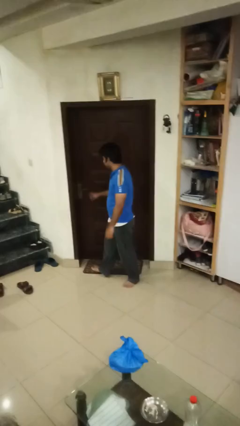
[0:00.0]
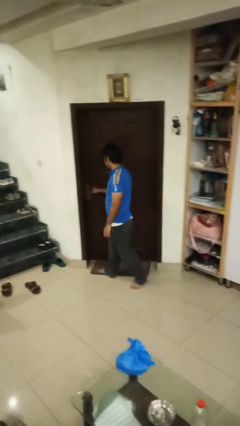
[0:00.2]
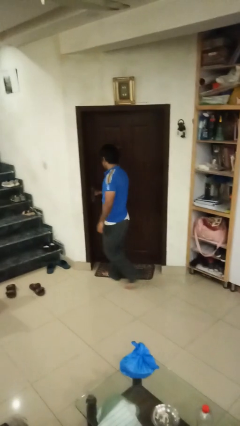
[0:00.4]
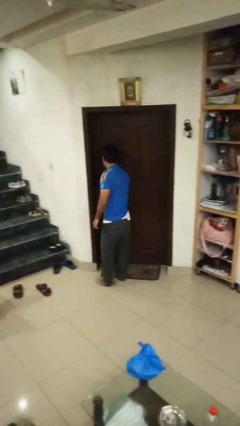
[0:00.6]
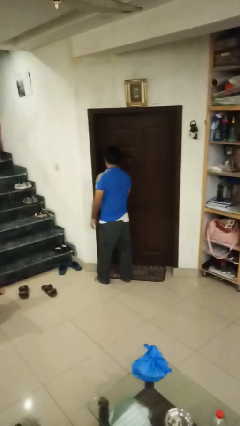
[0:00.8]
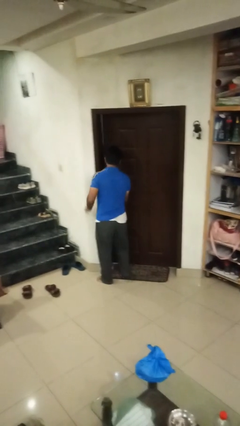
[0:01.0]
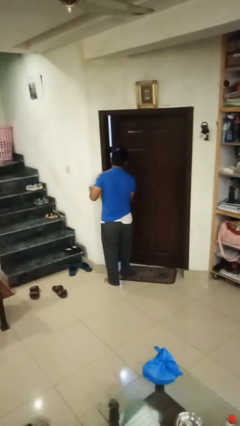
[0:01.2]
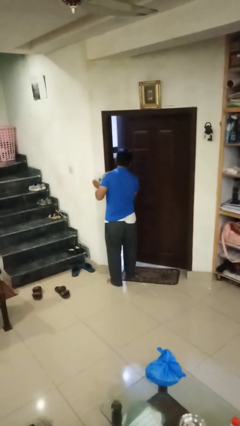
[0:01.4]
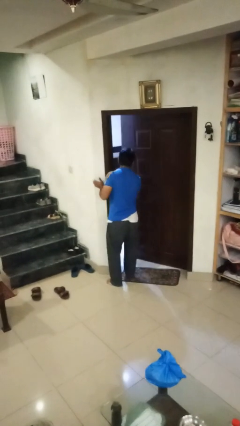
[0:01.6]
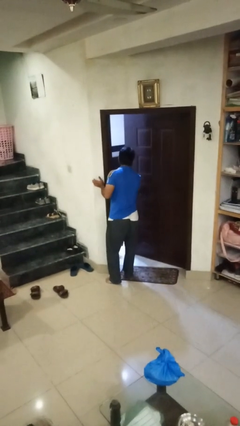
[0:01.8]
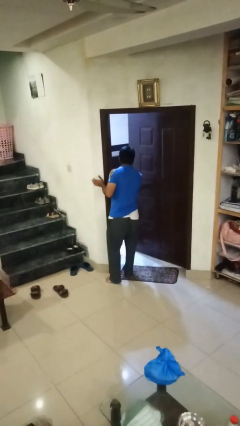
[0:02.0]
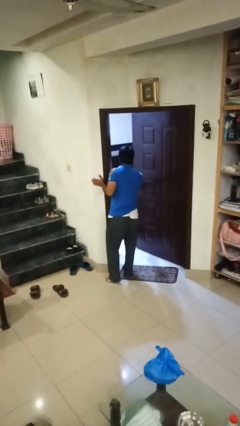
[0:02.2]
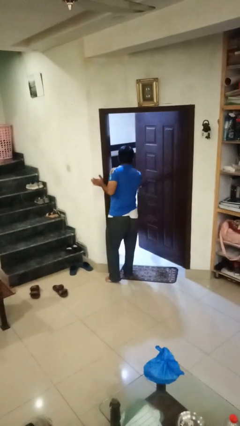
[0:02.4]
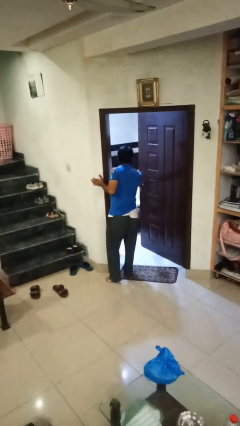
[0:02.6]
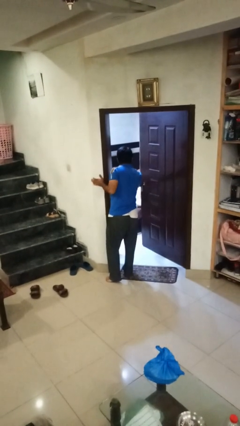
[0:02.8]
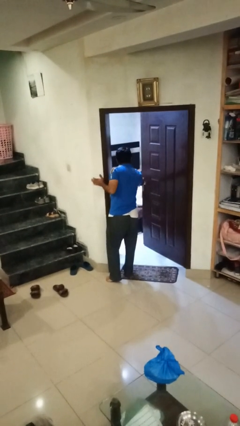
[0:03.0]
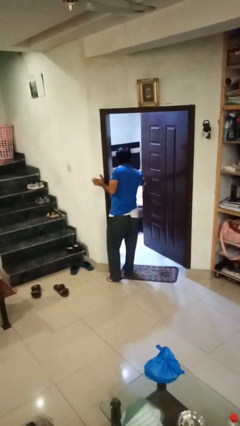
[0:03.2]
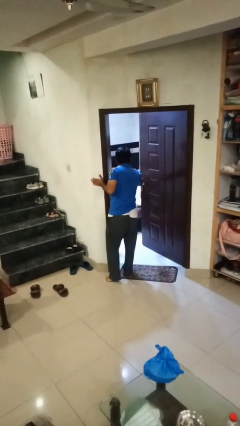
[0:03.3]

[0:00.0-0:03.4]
person opens facility door

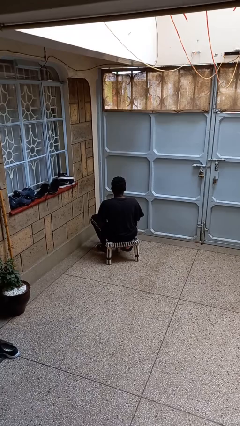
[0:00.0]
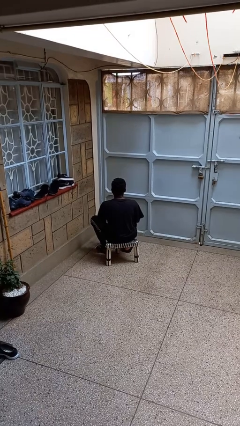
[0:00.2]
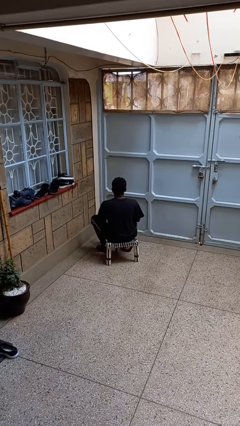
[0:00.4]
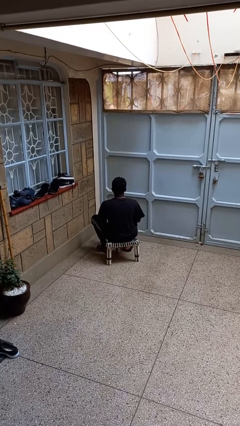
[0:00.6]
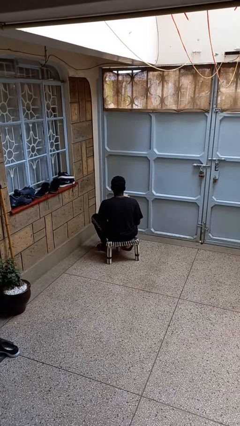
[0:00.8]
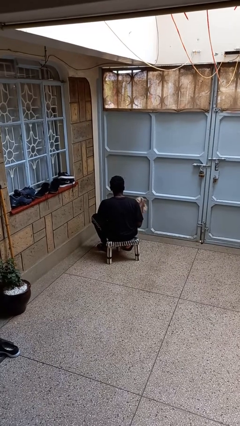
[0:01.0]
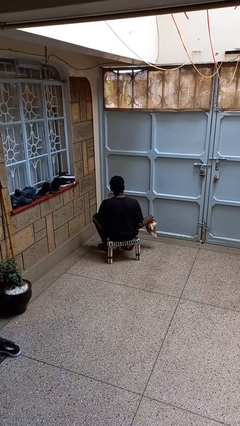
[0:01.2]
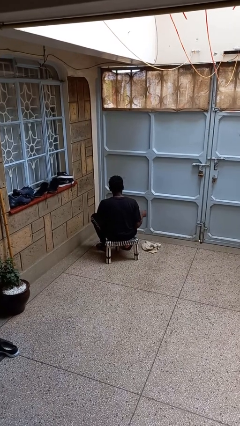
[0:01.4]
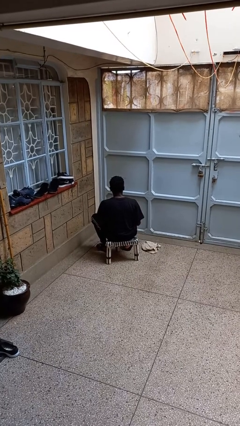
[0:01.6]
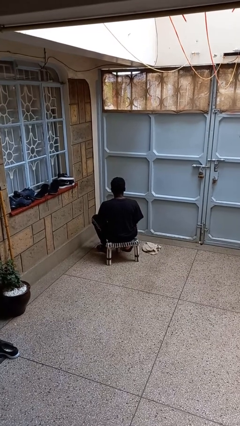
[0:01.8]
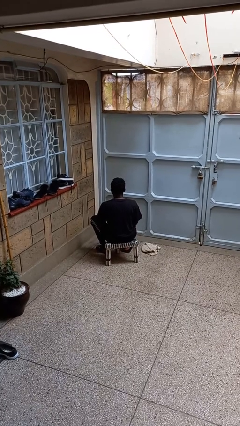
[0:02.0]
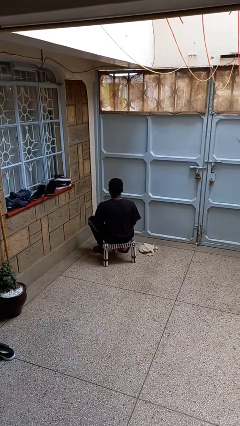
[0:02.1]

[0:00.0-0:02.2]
person throws object to ground

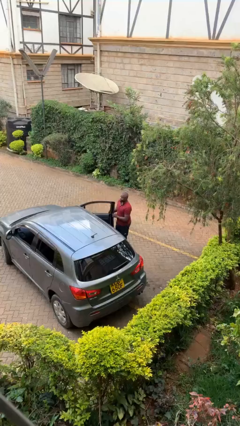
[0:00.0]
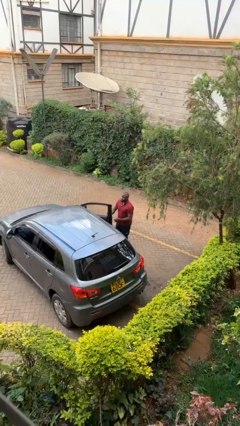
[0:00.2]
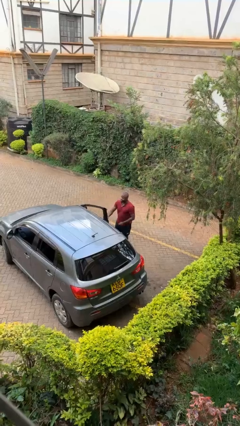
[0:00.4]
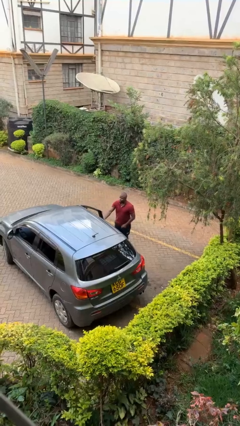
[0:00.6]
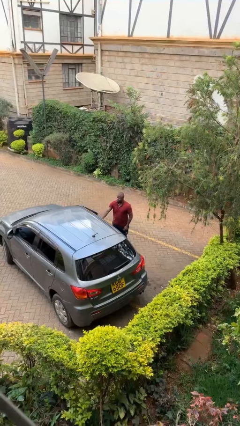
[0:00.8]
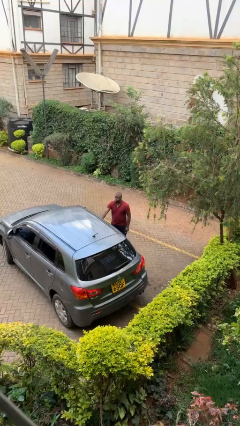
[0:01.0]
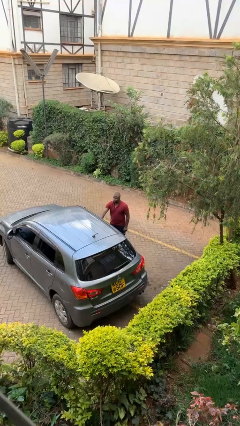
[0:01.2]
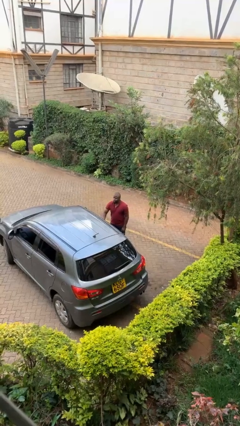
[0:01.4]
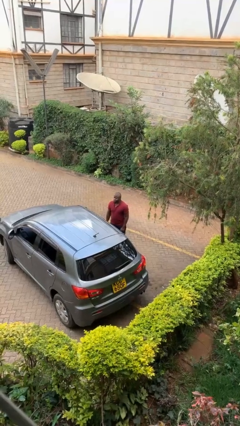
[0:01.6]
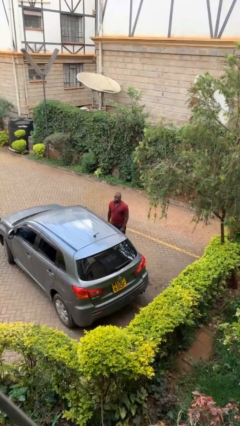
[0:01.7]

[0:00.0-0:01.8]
person closes car door

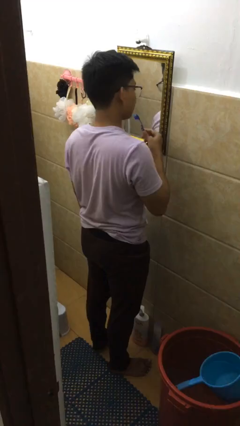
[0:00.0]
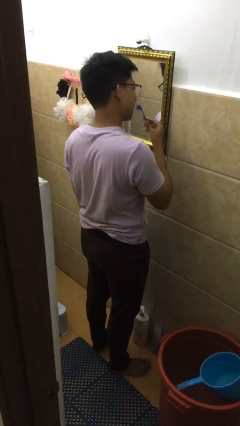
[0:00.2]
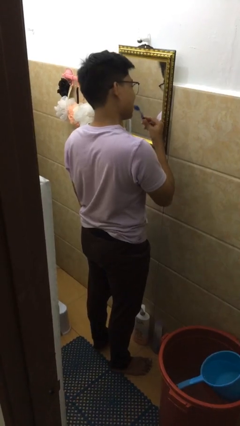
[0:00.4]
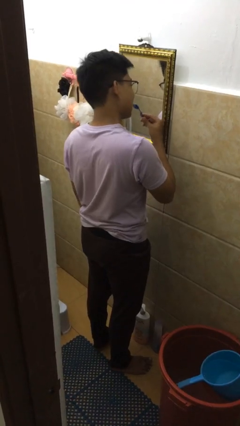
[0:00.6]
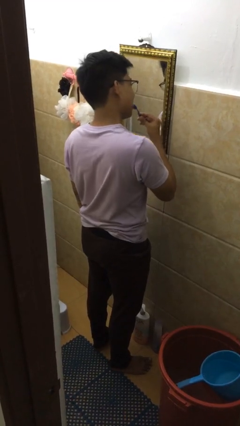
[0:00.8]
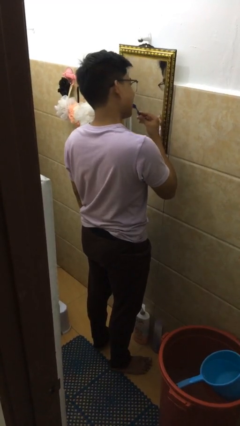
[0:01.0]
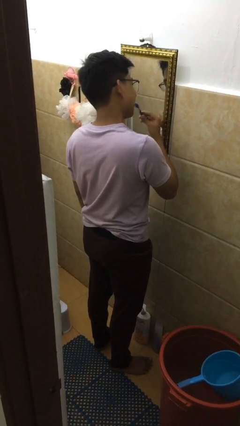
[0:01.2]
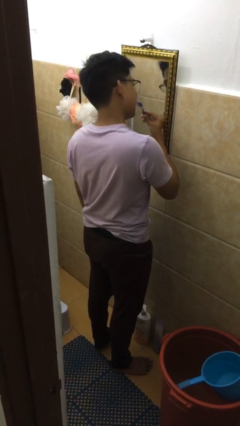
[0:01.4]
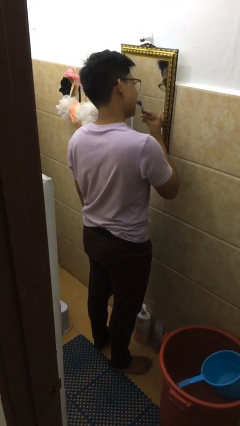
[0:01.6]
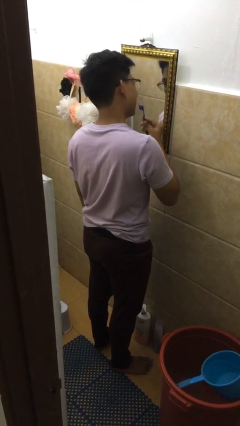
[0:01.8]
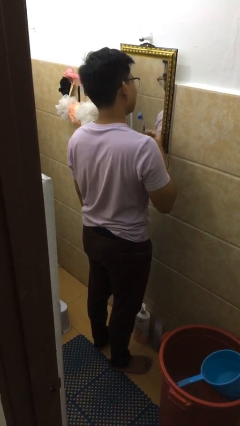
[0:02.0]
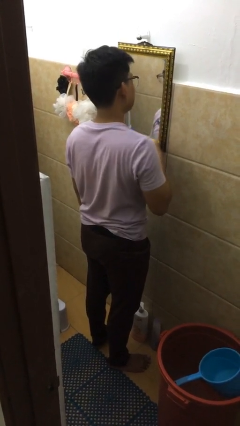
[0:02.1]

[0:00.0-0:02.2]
person brushes teeth

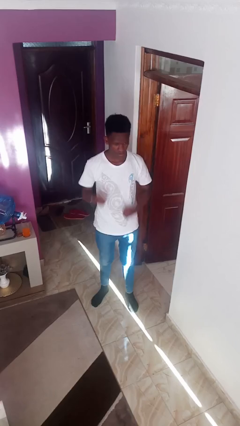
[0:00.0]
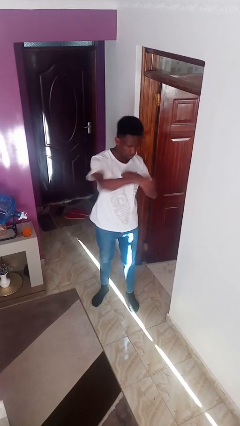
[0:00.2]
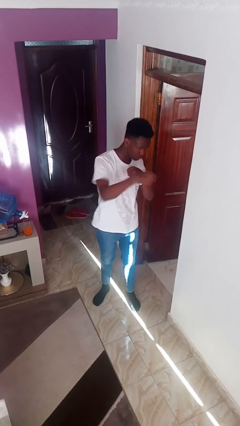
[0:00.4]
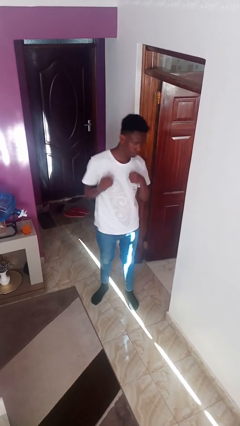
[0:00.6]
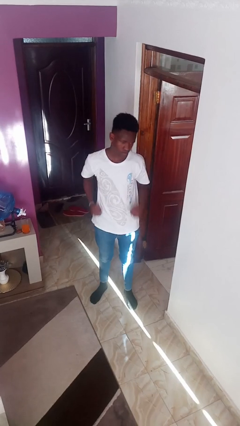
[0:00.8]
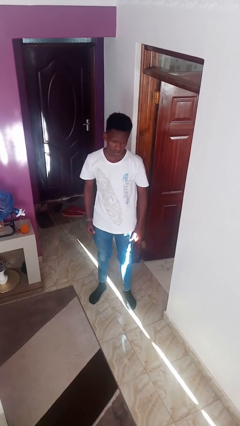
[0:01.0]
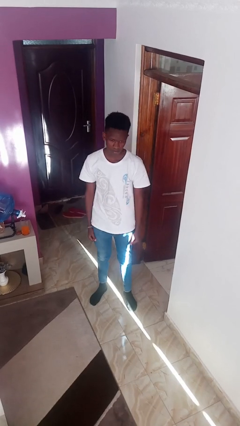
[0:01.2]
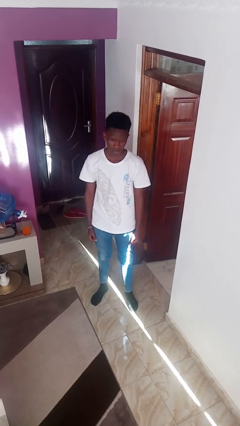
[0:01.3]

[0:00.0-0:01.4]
person punches

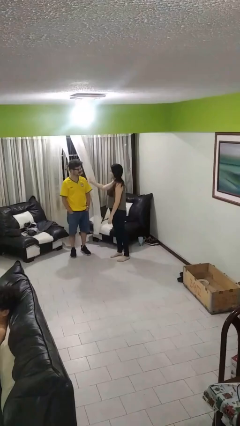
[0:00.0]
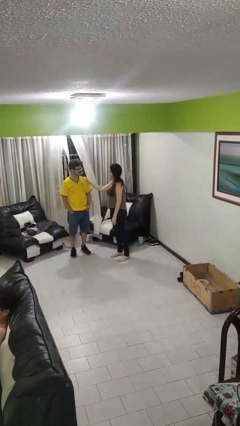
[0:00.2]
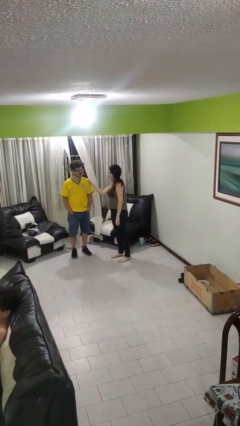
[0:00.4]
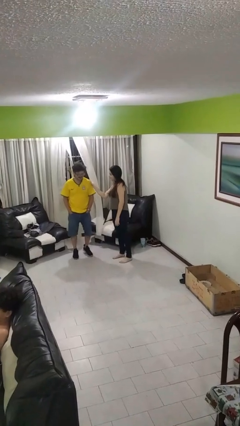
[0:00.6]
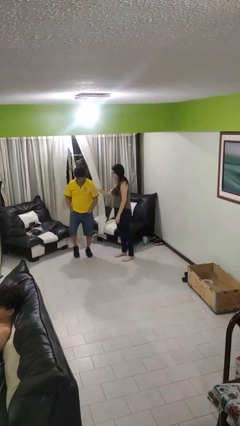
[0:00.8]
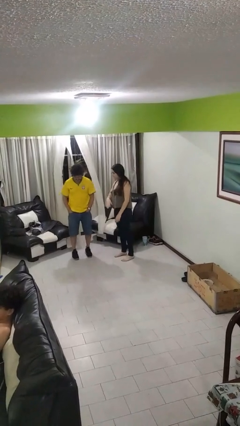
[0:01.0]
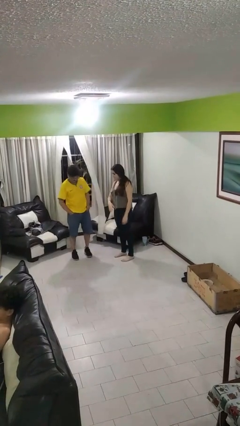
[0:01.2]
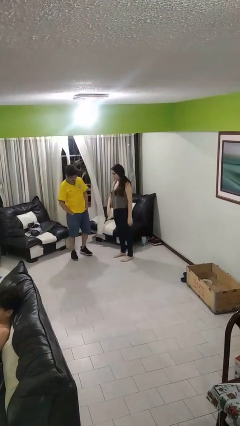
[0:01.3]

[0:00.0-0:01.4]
person shoves person

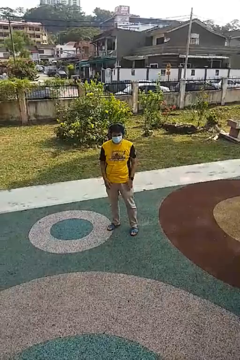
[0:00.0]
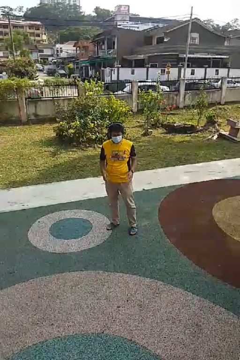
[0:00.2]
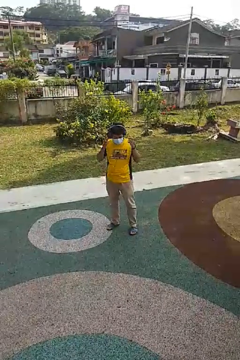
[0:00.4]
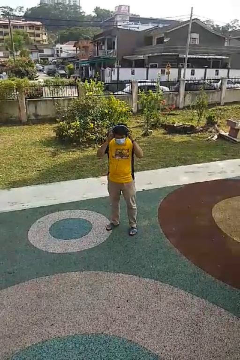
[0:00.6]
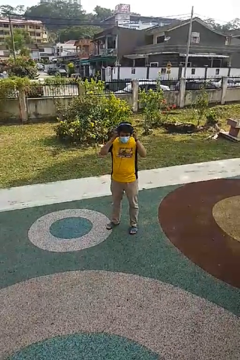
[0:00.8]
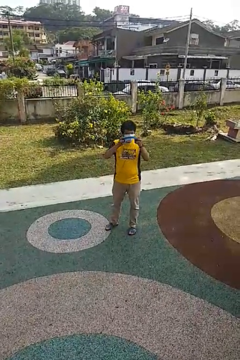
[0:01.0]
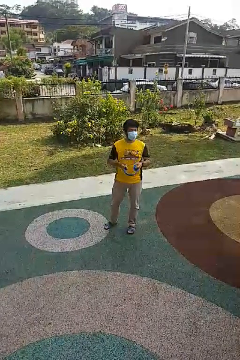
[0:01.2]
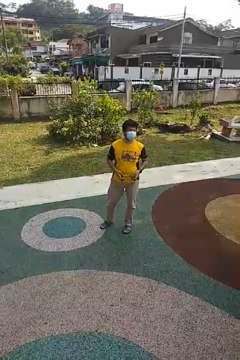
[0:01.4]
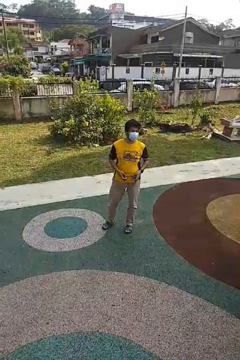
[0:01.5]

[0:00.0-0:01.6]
person takes off headphones

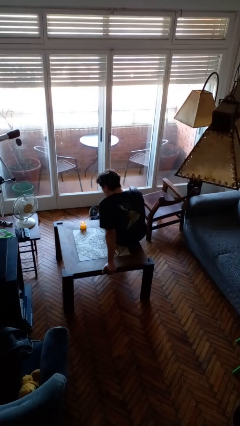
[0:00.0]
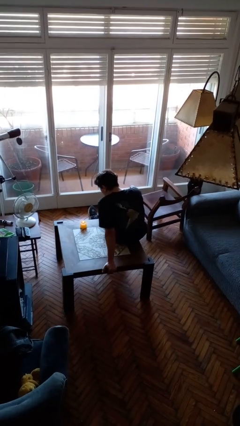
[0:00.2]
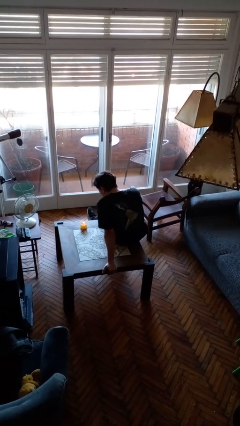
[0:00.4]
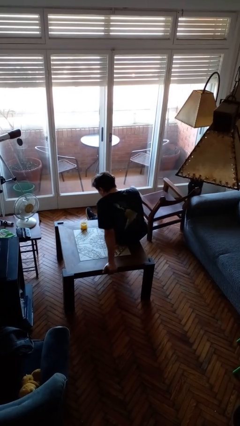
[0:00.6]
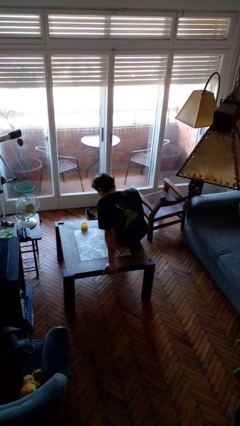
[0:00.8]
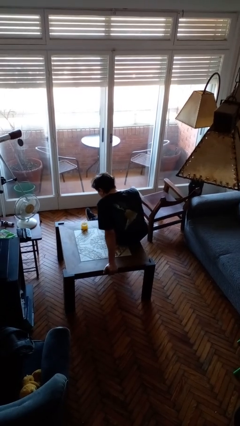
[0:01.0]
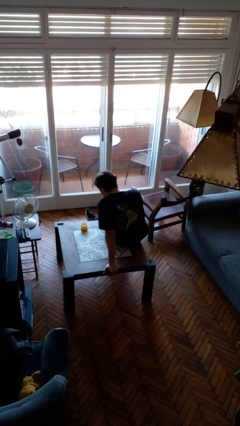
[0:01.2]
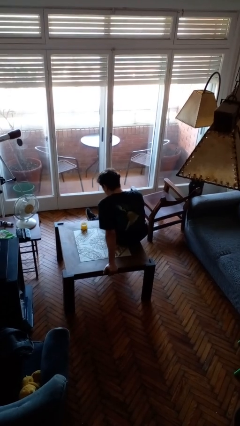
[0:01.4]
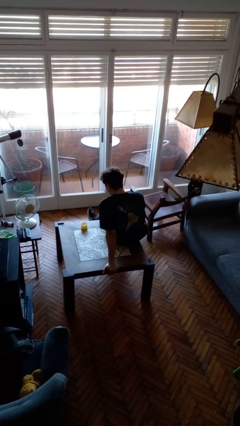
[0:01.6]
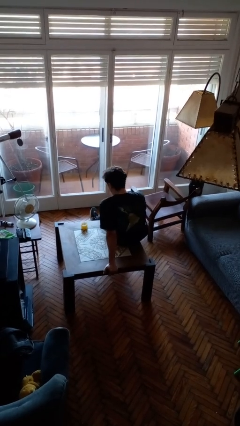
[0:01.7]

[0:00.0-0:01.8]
person extinguishes candle

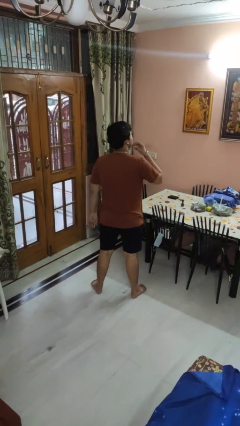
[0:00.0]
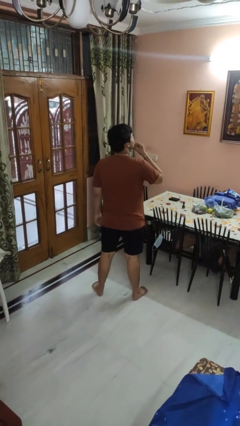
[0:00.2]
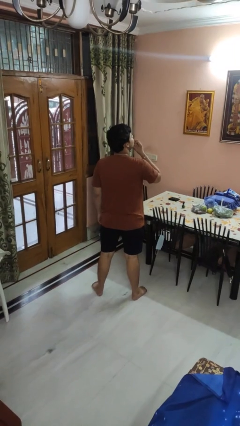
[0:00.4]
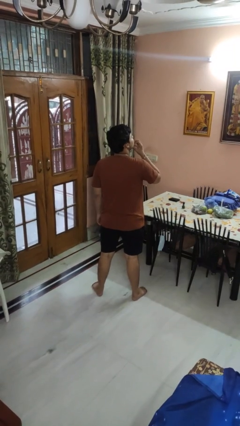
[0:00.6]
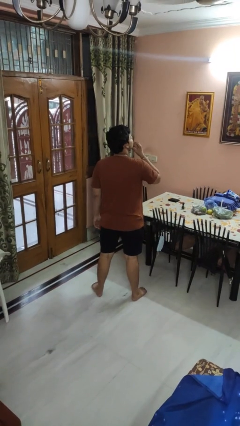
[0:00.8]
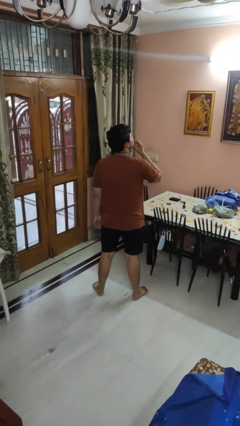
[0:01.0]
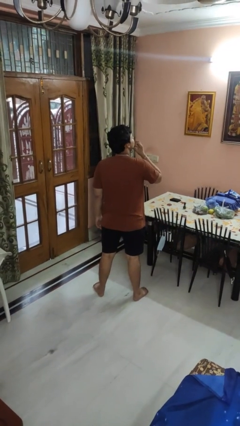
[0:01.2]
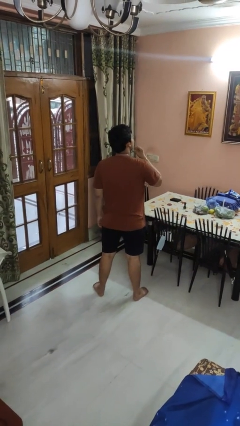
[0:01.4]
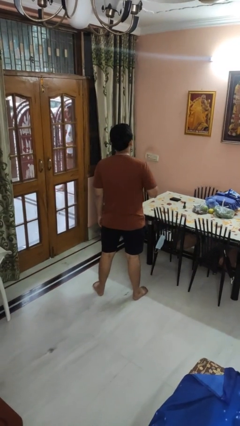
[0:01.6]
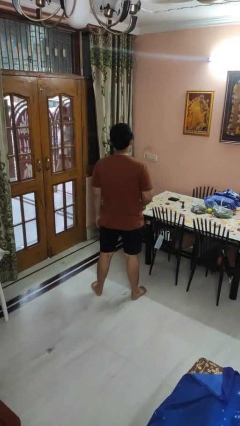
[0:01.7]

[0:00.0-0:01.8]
person strokes chin
